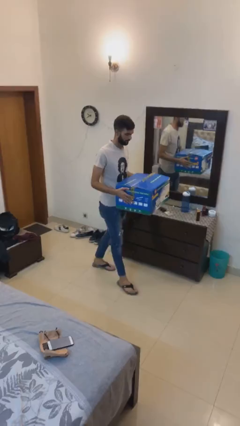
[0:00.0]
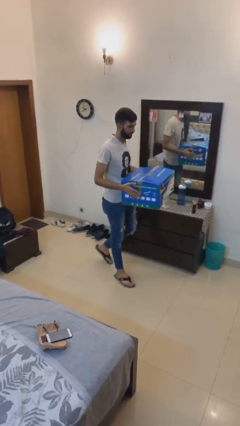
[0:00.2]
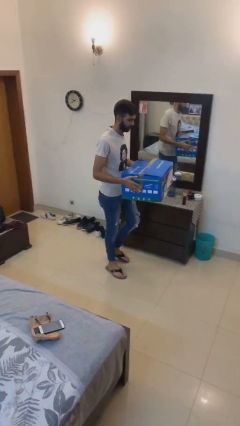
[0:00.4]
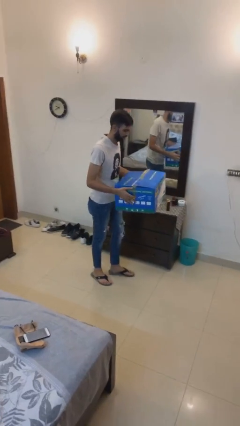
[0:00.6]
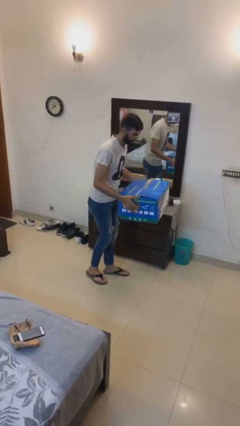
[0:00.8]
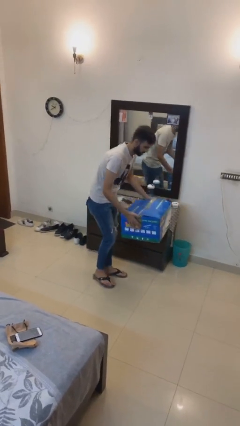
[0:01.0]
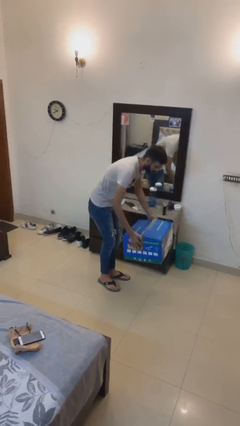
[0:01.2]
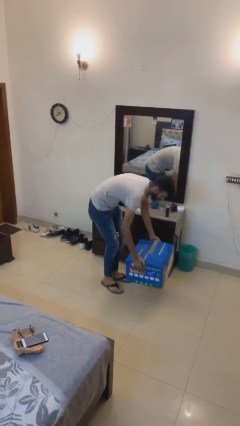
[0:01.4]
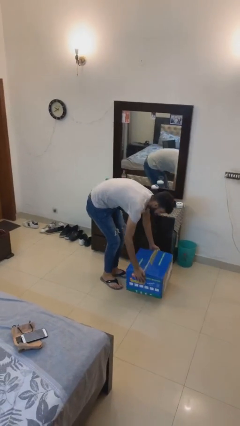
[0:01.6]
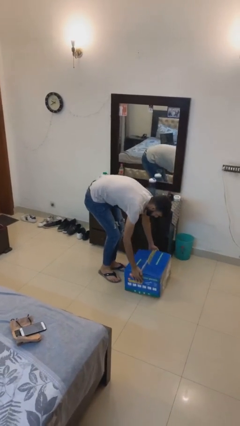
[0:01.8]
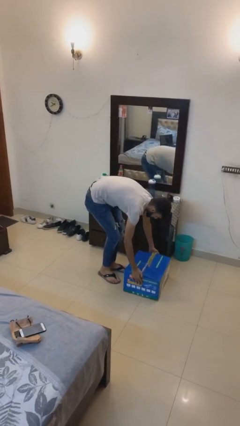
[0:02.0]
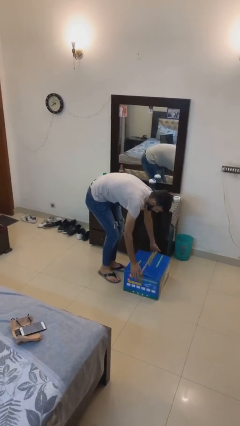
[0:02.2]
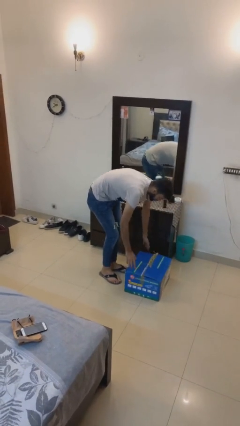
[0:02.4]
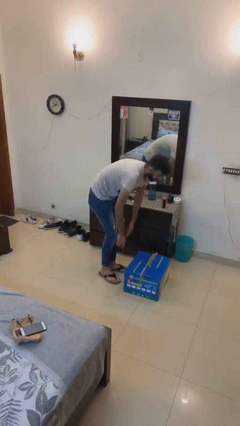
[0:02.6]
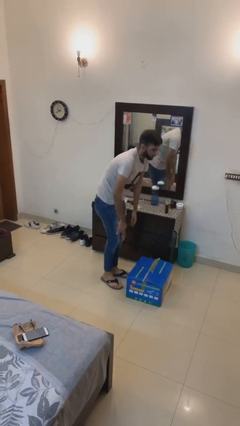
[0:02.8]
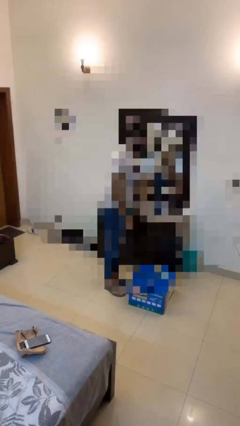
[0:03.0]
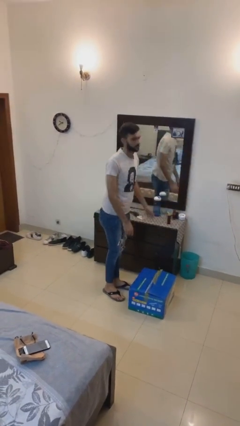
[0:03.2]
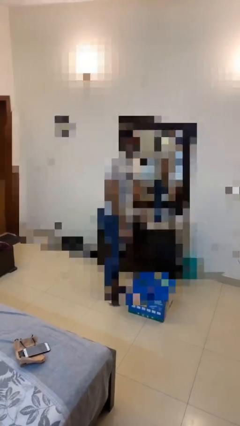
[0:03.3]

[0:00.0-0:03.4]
person puts down object on floor

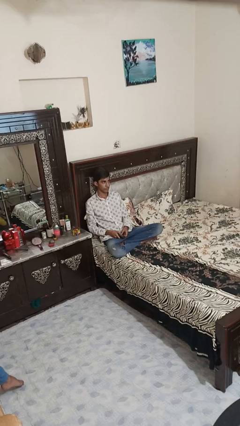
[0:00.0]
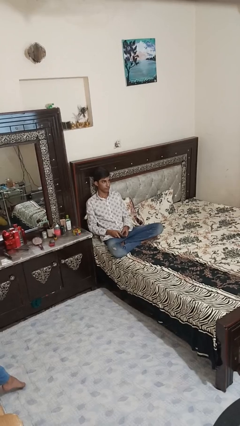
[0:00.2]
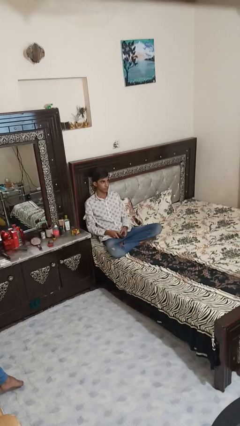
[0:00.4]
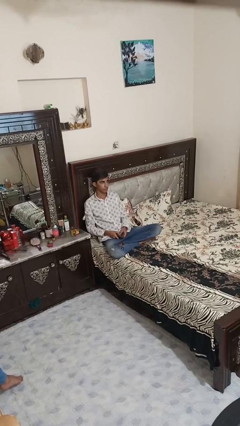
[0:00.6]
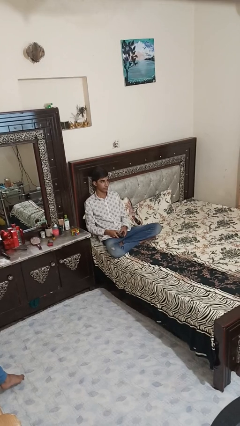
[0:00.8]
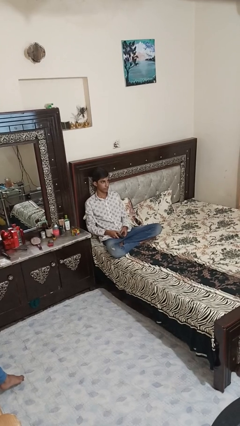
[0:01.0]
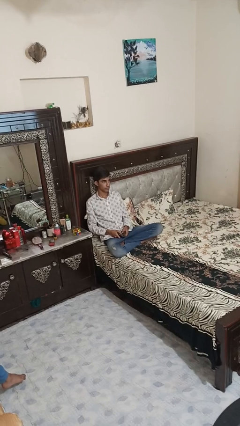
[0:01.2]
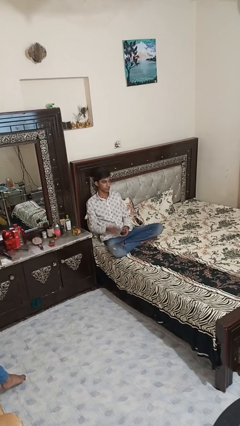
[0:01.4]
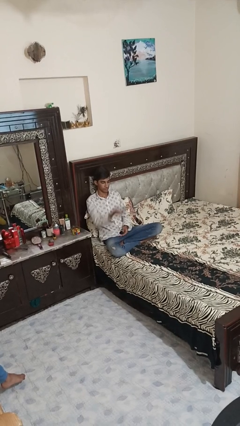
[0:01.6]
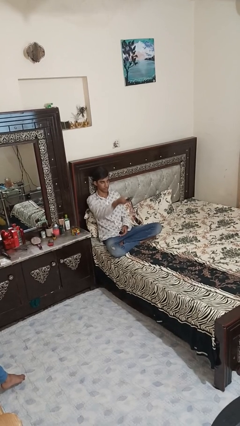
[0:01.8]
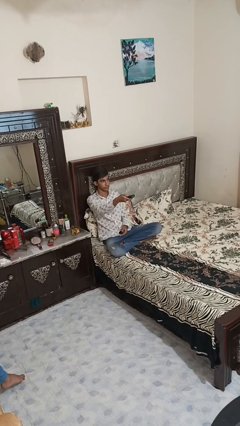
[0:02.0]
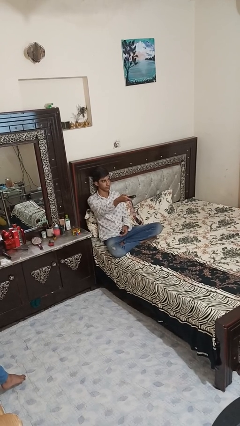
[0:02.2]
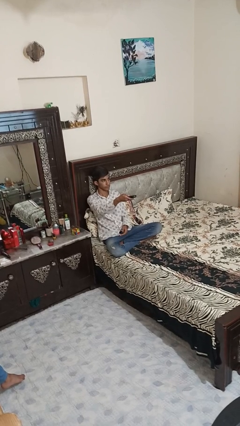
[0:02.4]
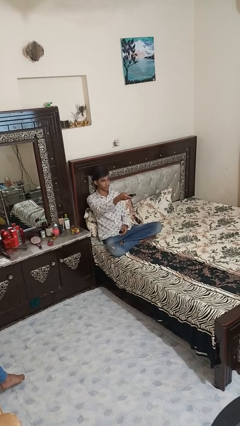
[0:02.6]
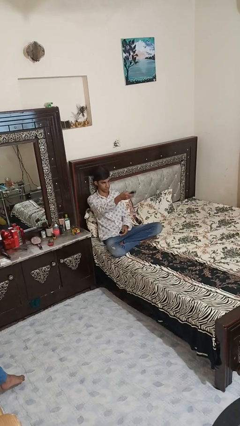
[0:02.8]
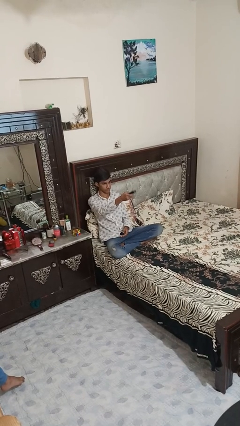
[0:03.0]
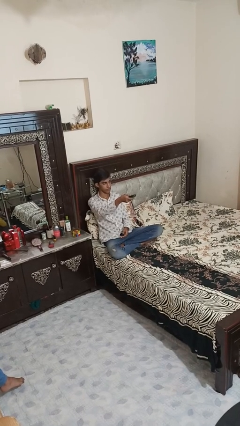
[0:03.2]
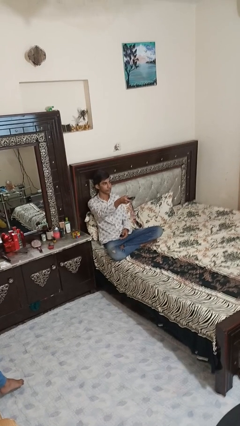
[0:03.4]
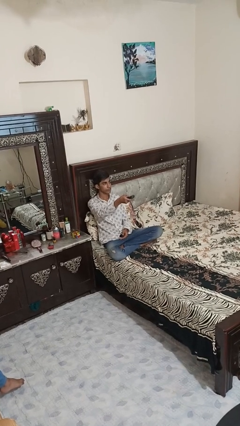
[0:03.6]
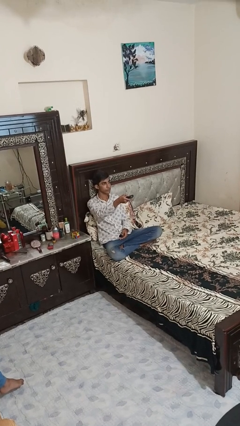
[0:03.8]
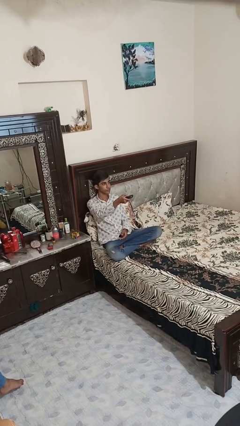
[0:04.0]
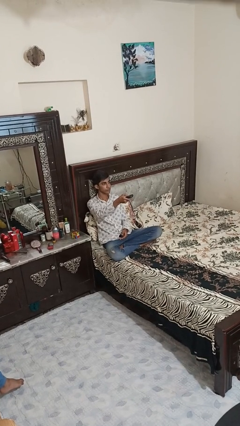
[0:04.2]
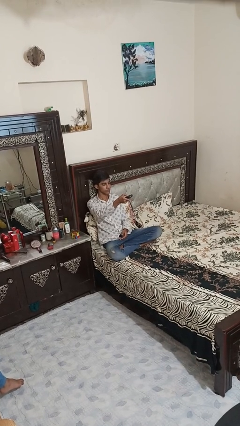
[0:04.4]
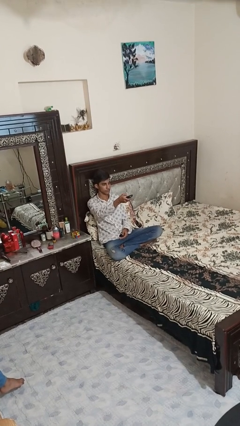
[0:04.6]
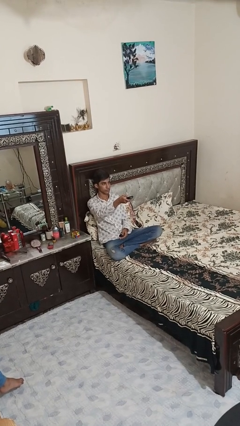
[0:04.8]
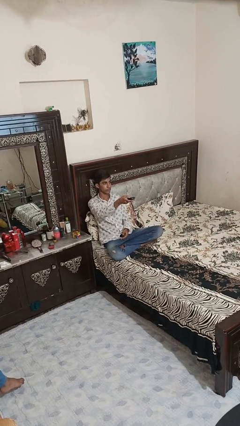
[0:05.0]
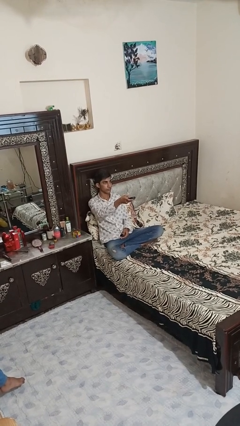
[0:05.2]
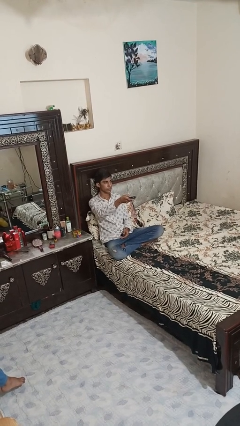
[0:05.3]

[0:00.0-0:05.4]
person uses television remote

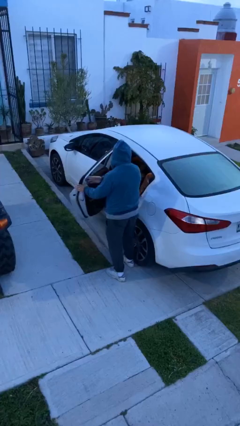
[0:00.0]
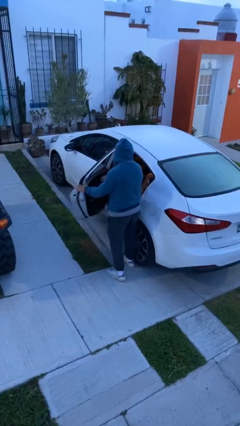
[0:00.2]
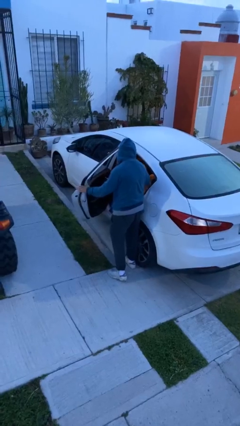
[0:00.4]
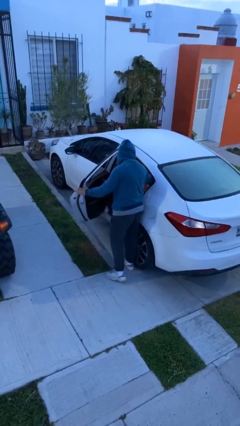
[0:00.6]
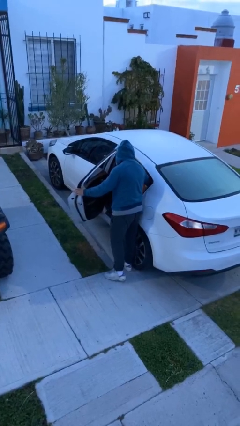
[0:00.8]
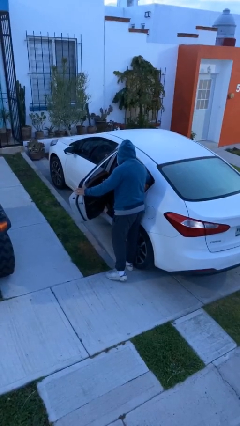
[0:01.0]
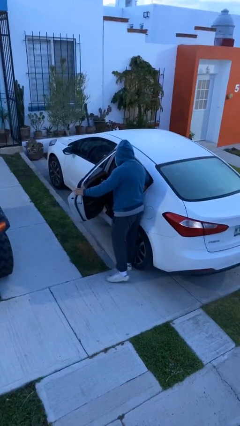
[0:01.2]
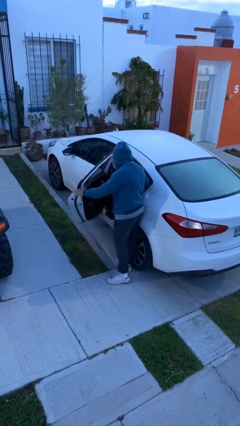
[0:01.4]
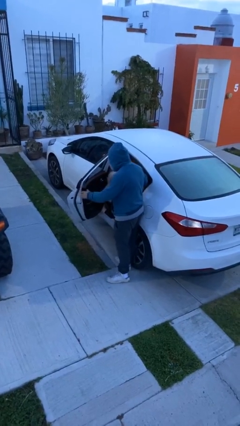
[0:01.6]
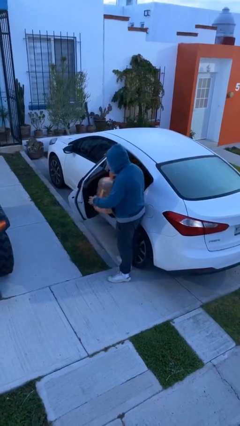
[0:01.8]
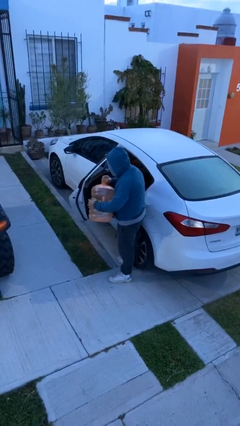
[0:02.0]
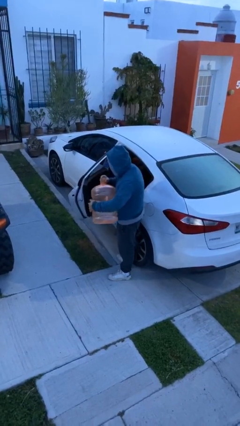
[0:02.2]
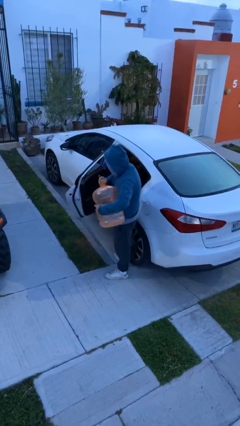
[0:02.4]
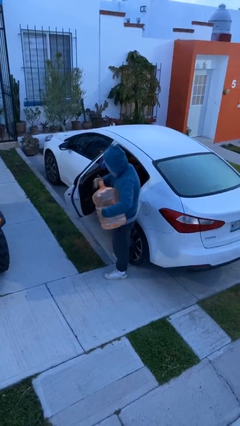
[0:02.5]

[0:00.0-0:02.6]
person unloads car

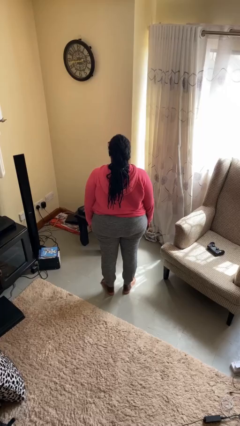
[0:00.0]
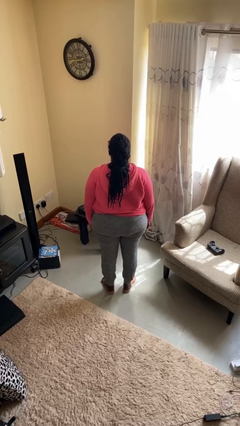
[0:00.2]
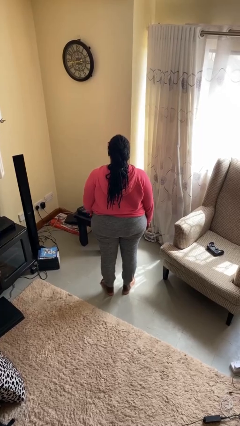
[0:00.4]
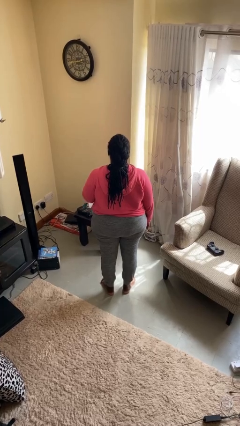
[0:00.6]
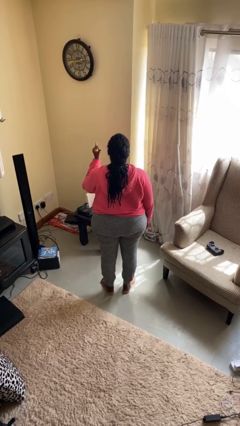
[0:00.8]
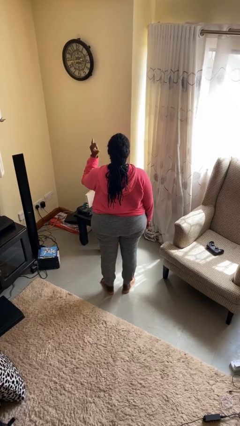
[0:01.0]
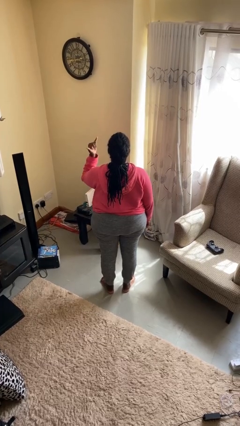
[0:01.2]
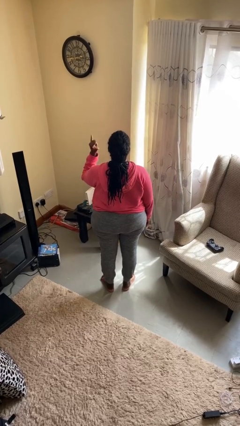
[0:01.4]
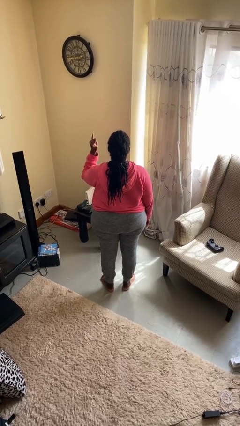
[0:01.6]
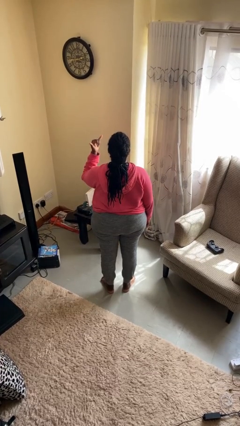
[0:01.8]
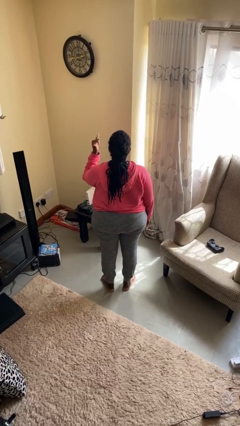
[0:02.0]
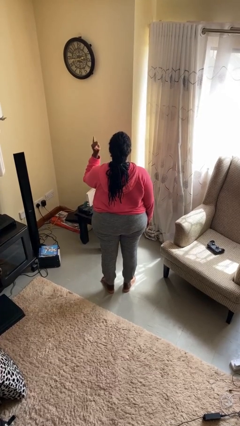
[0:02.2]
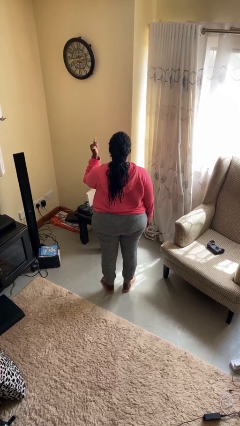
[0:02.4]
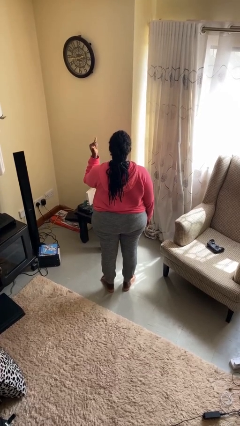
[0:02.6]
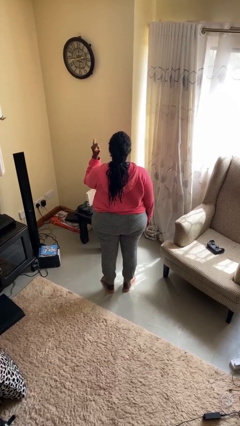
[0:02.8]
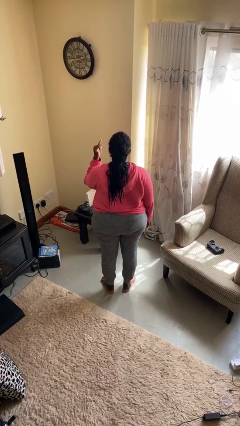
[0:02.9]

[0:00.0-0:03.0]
person gestures hang loose

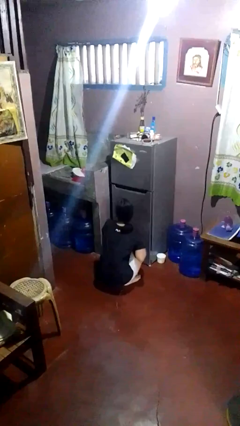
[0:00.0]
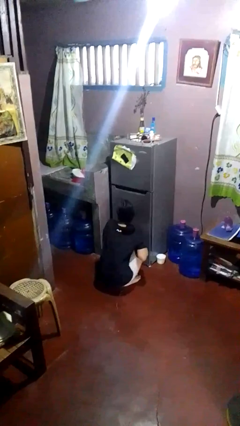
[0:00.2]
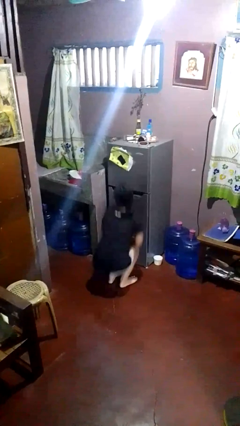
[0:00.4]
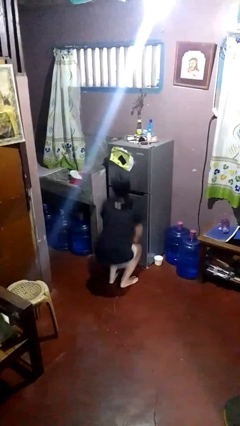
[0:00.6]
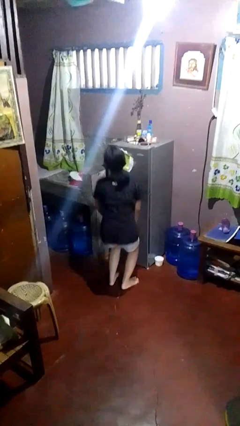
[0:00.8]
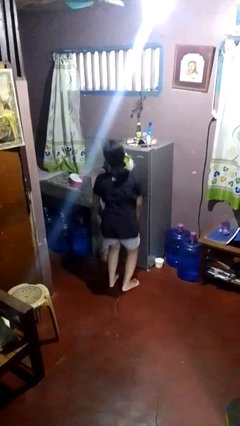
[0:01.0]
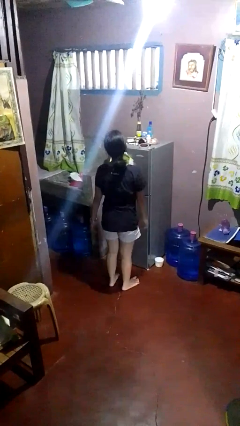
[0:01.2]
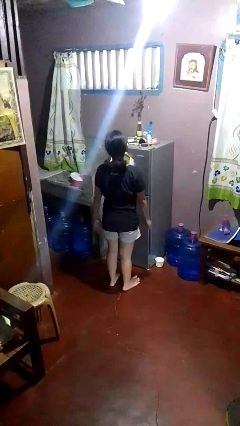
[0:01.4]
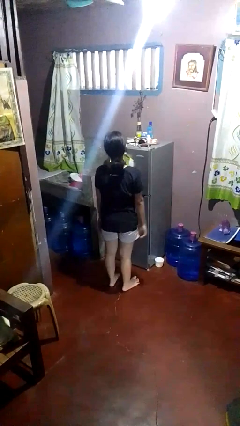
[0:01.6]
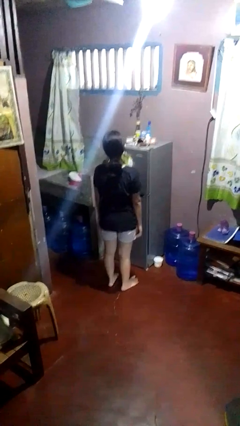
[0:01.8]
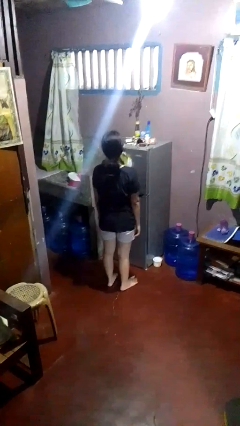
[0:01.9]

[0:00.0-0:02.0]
person stands up

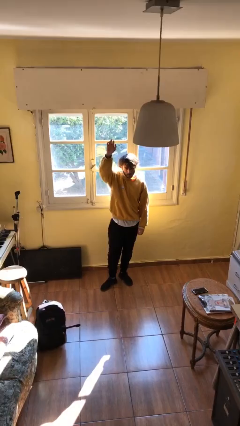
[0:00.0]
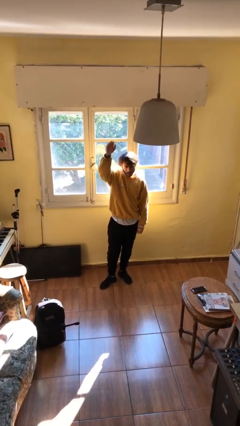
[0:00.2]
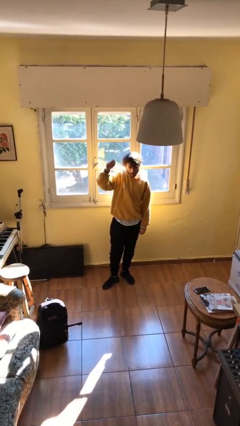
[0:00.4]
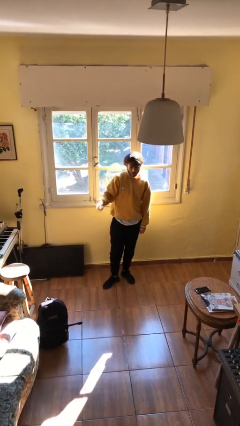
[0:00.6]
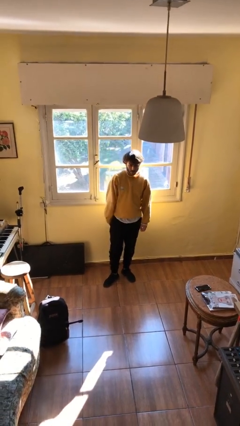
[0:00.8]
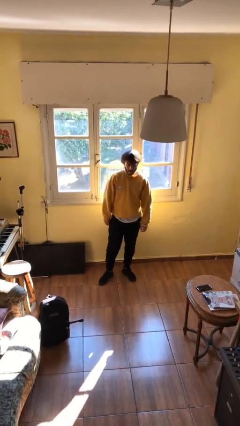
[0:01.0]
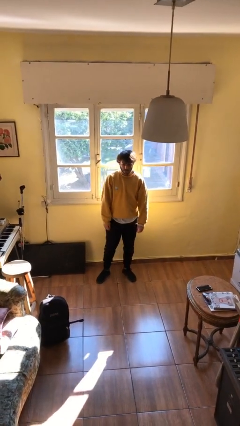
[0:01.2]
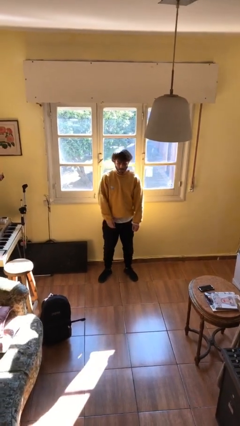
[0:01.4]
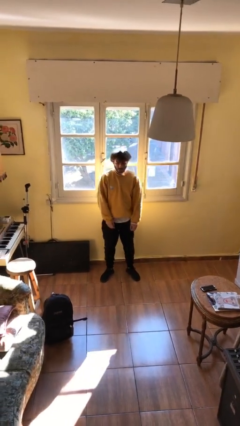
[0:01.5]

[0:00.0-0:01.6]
person gestures lower hand
